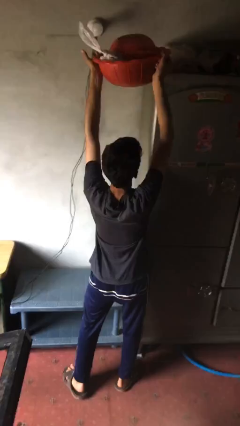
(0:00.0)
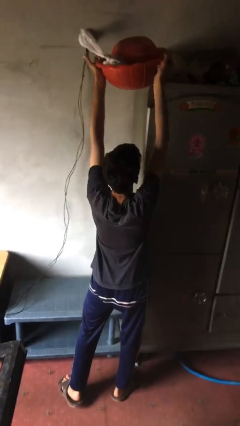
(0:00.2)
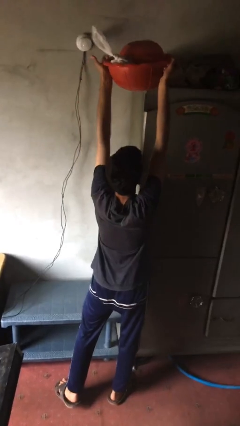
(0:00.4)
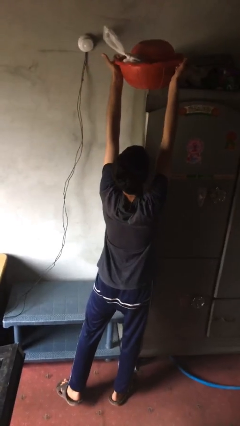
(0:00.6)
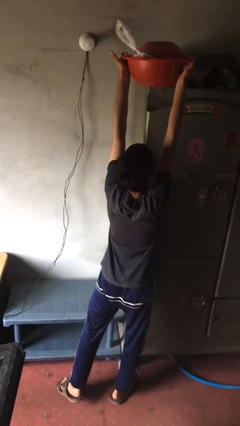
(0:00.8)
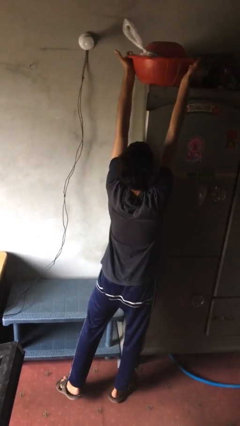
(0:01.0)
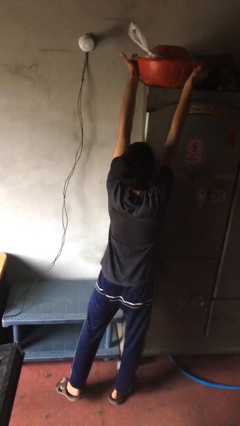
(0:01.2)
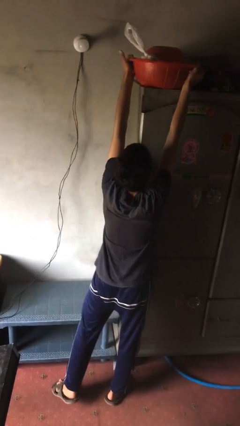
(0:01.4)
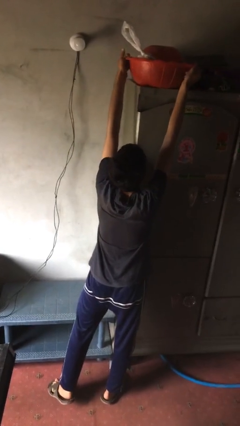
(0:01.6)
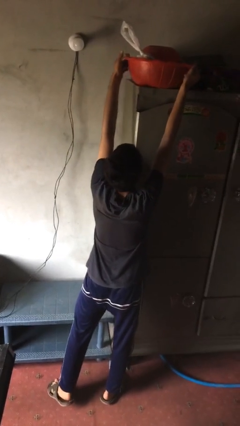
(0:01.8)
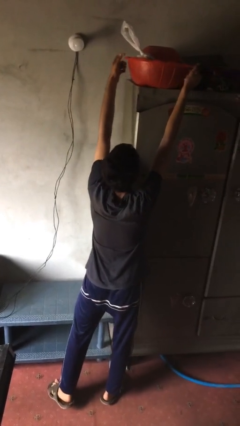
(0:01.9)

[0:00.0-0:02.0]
person puts down object on shelf

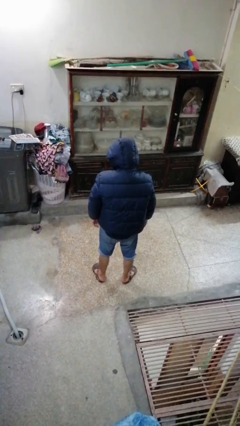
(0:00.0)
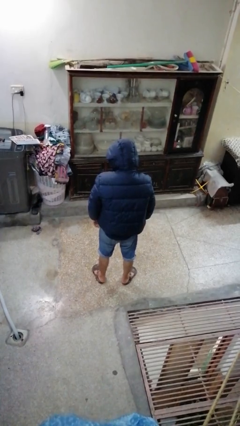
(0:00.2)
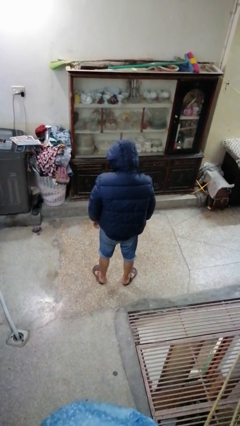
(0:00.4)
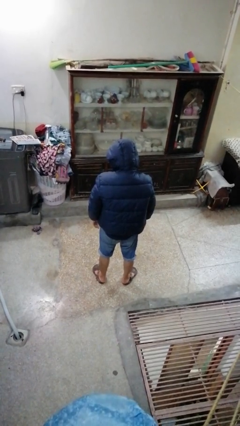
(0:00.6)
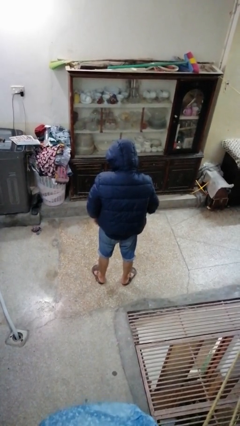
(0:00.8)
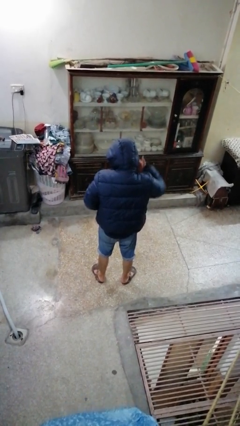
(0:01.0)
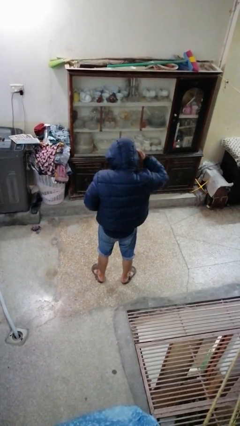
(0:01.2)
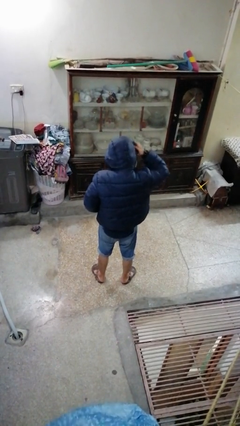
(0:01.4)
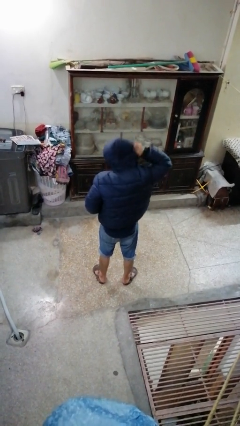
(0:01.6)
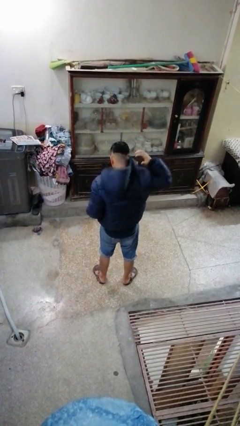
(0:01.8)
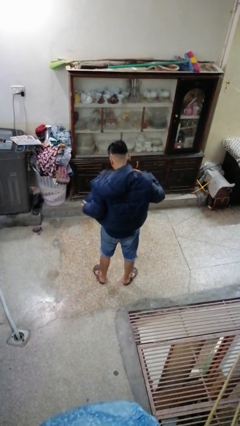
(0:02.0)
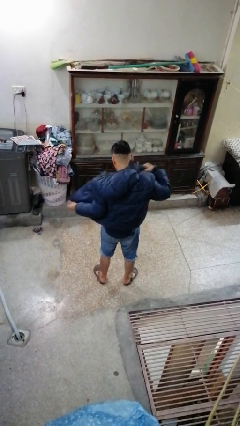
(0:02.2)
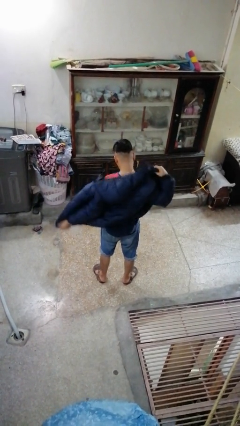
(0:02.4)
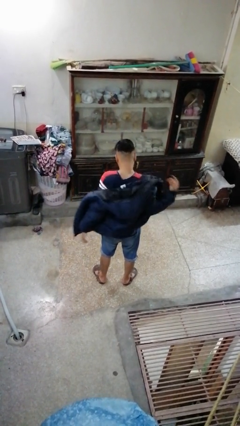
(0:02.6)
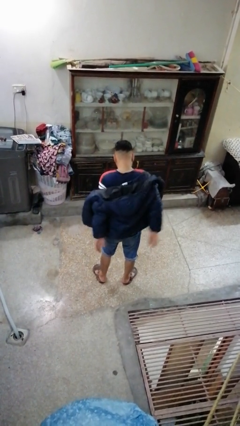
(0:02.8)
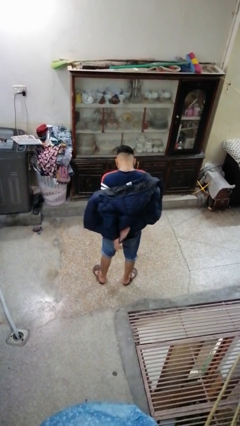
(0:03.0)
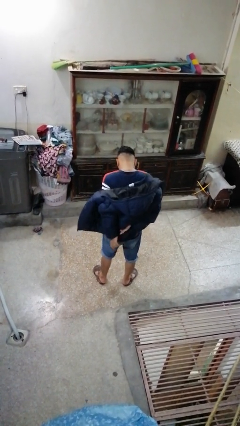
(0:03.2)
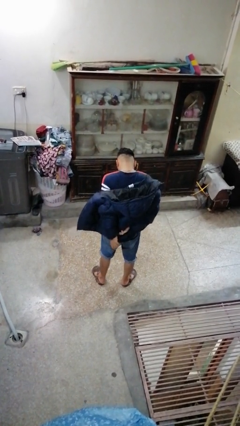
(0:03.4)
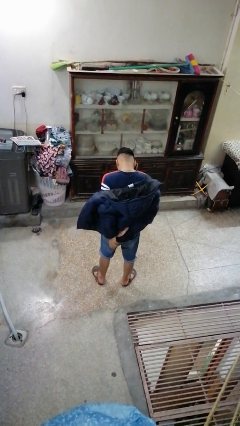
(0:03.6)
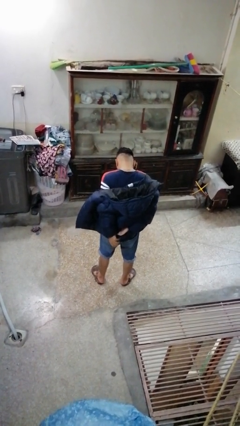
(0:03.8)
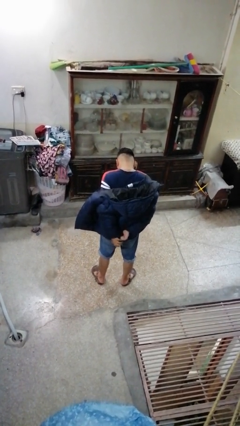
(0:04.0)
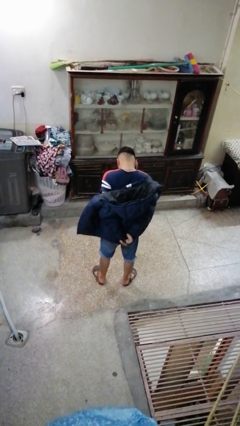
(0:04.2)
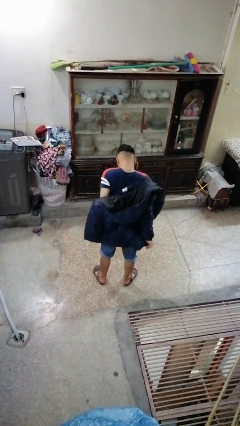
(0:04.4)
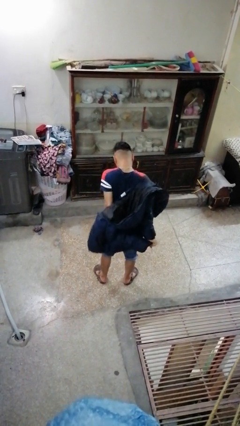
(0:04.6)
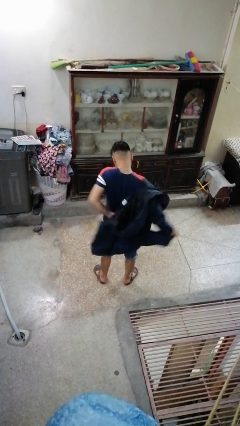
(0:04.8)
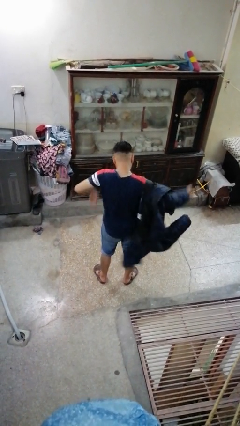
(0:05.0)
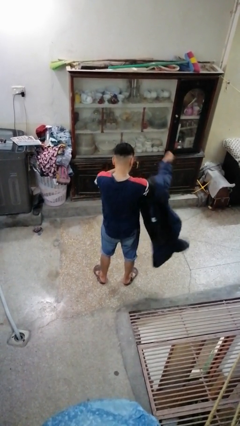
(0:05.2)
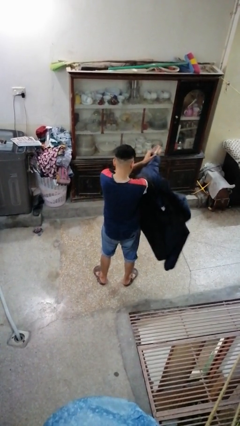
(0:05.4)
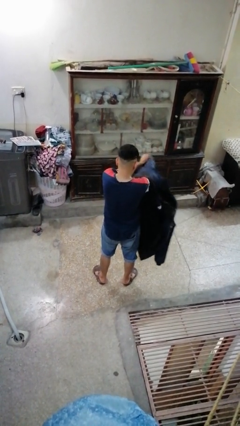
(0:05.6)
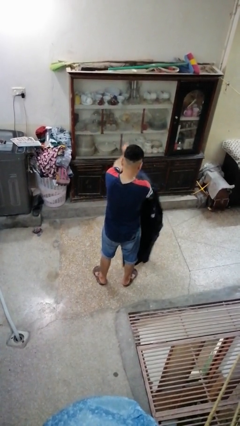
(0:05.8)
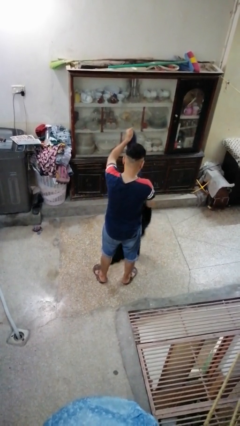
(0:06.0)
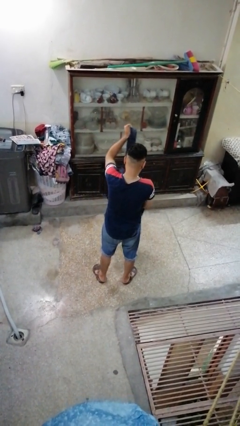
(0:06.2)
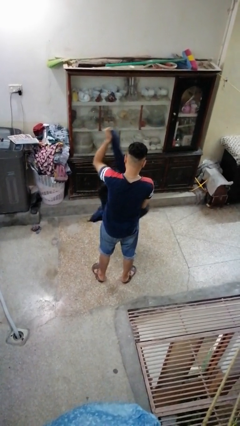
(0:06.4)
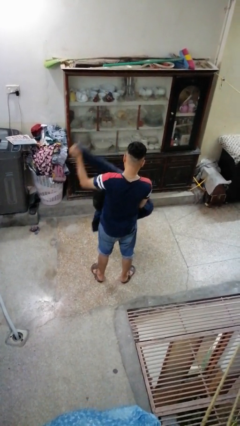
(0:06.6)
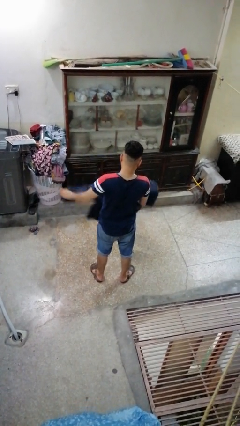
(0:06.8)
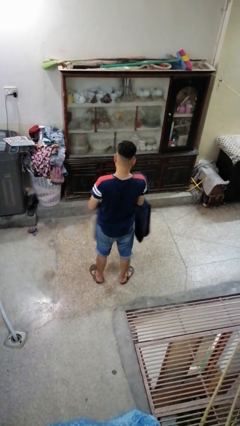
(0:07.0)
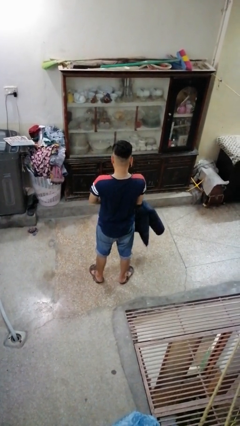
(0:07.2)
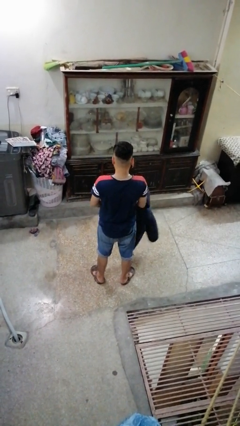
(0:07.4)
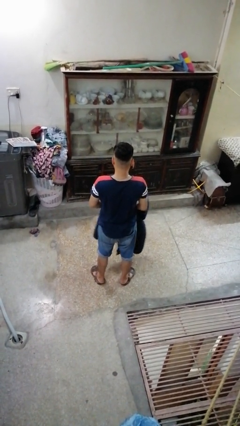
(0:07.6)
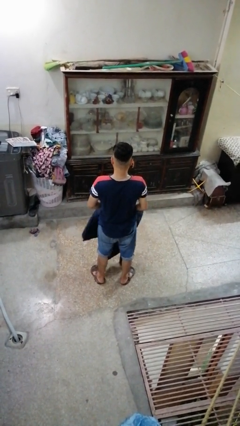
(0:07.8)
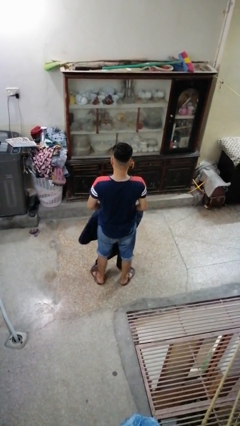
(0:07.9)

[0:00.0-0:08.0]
person takes off hoodie

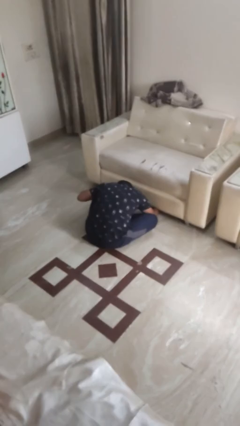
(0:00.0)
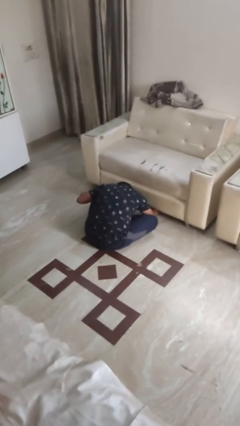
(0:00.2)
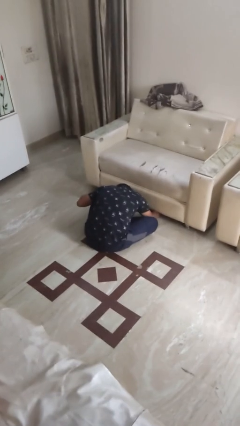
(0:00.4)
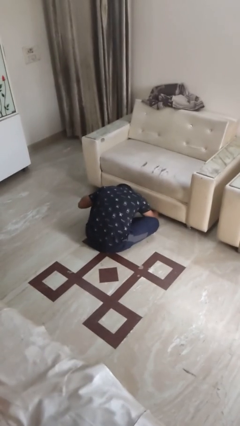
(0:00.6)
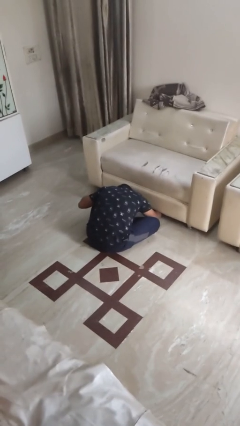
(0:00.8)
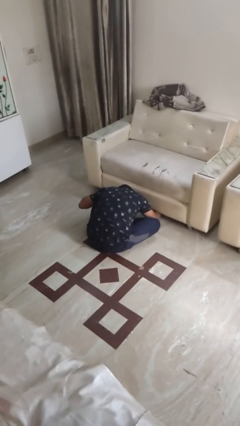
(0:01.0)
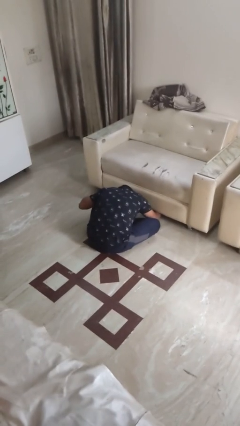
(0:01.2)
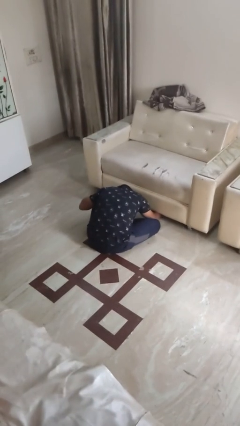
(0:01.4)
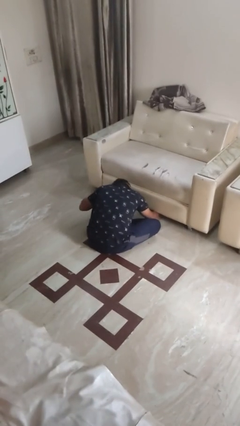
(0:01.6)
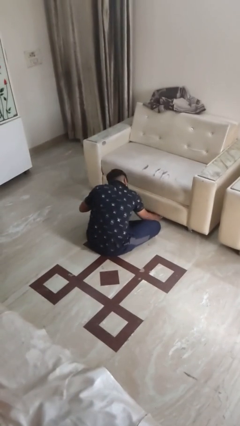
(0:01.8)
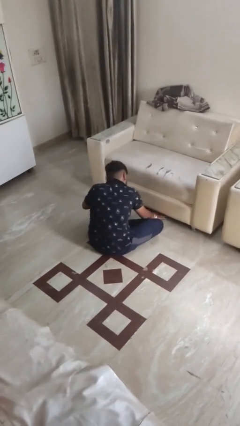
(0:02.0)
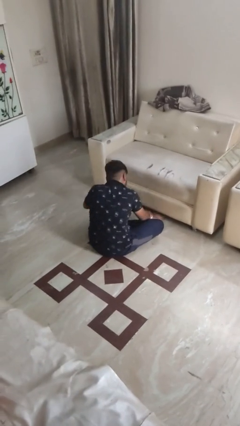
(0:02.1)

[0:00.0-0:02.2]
person searches under couch

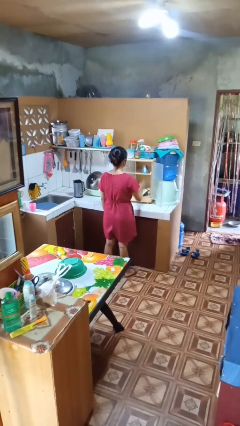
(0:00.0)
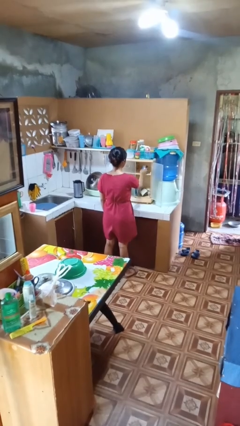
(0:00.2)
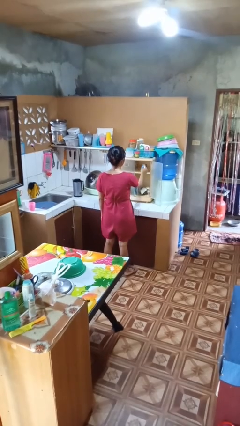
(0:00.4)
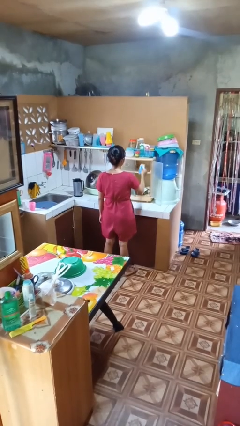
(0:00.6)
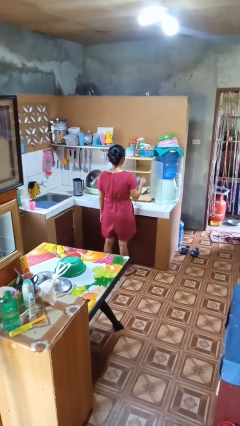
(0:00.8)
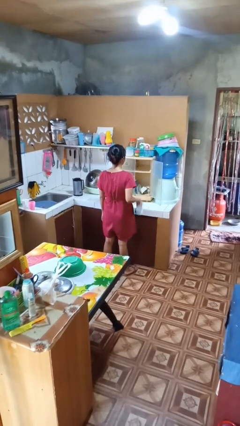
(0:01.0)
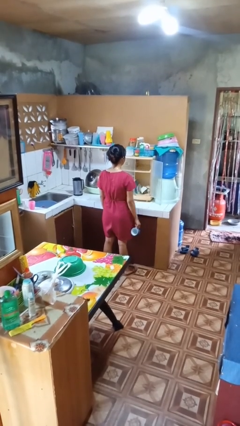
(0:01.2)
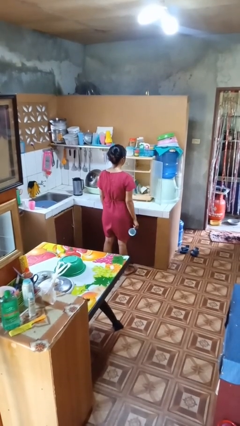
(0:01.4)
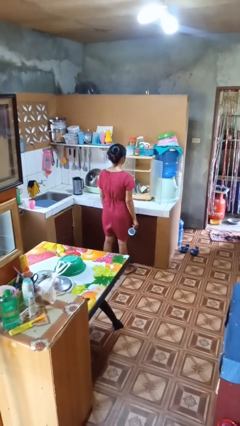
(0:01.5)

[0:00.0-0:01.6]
person takes object from cabinet

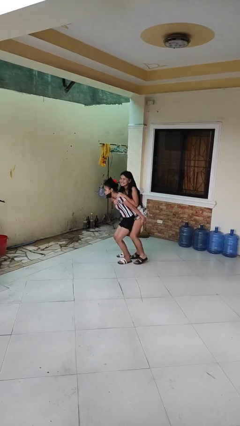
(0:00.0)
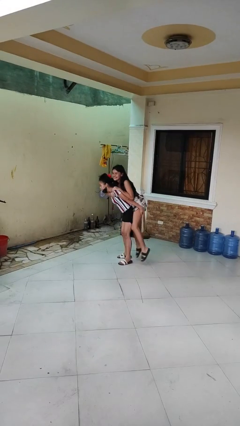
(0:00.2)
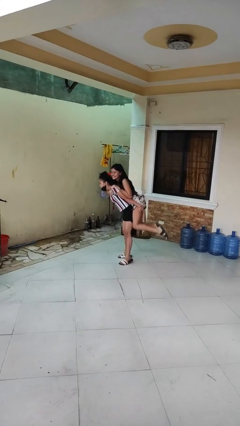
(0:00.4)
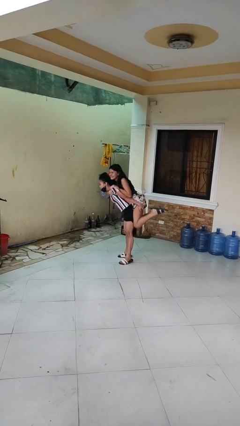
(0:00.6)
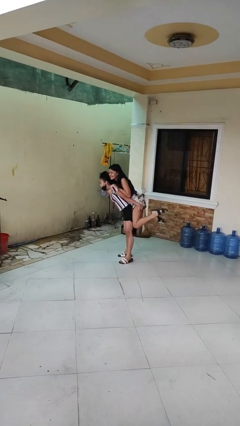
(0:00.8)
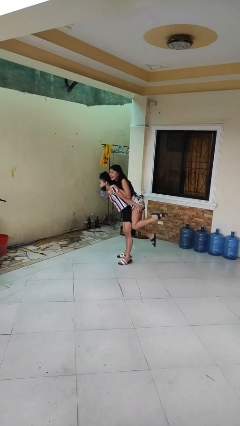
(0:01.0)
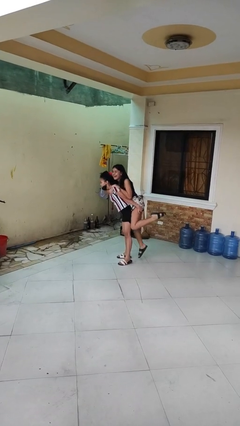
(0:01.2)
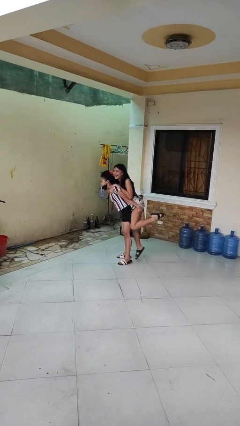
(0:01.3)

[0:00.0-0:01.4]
person carries person over shoulder

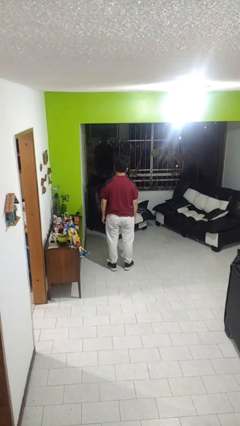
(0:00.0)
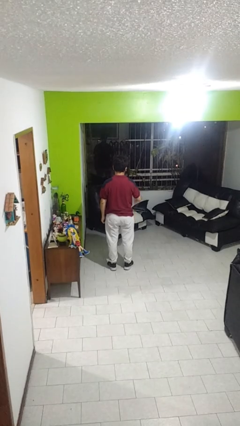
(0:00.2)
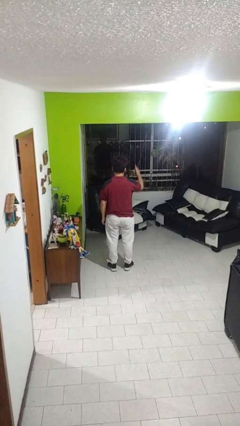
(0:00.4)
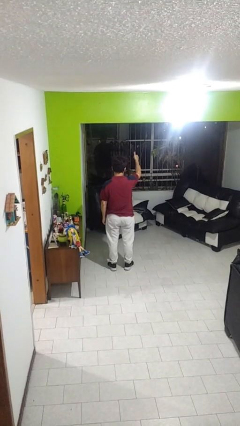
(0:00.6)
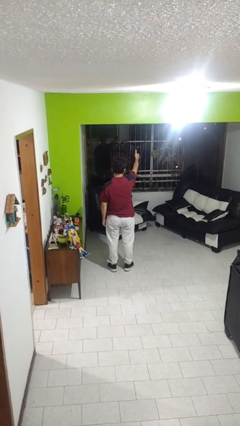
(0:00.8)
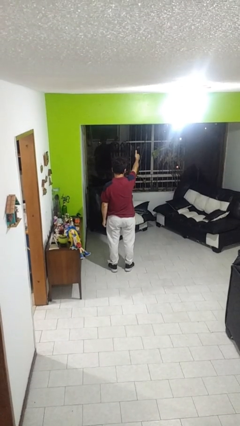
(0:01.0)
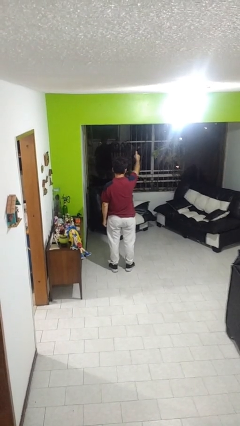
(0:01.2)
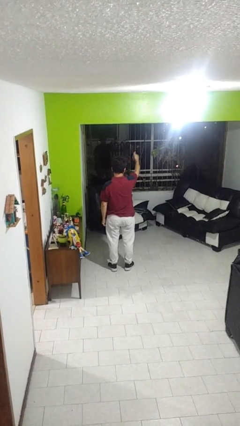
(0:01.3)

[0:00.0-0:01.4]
person gestures thumbs up

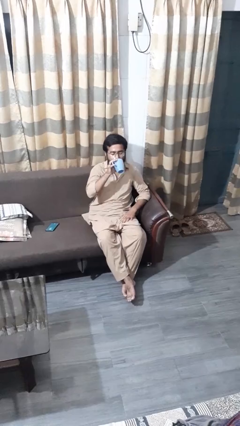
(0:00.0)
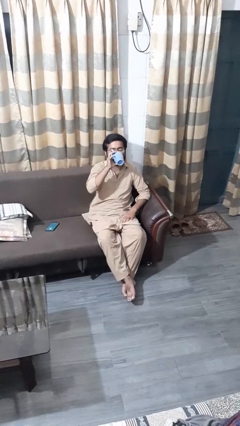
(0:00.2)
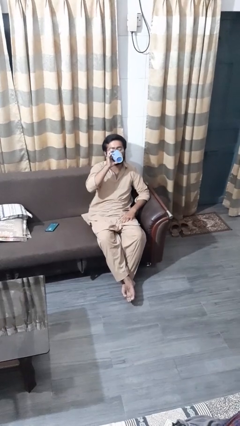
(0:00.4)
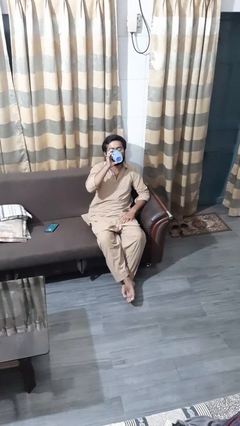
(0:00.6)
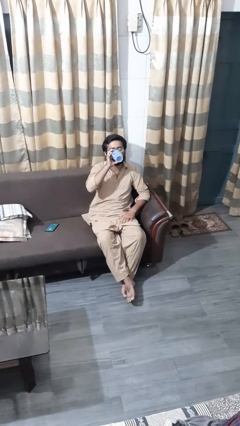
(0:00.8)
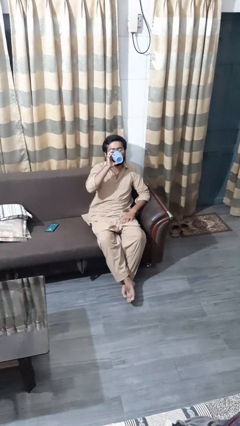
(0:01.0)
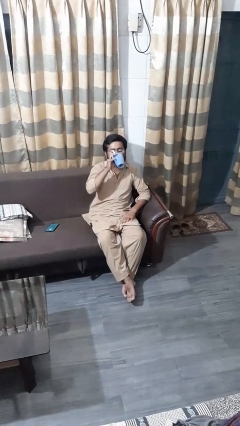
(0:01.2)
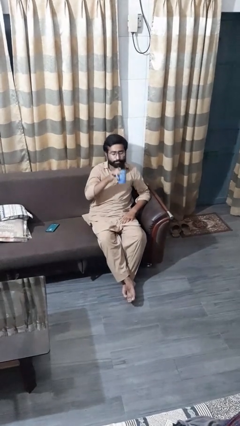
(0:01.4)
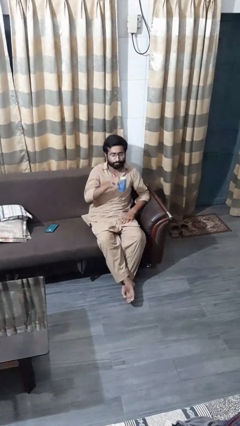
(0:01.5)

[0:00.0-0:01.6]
person drinks from mug
